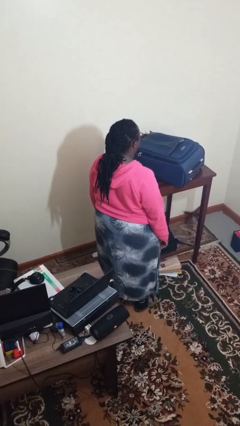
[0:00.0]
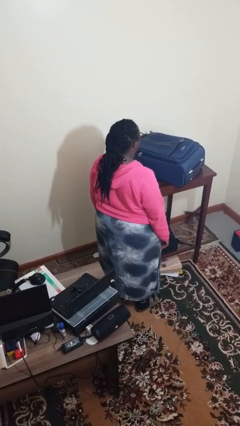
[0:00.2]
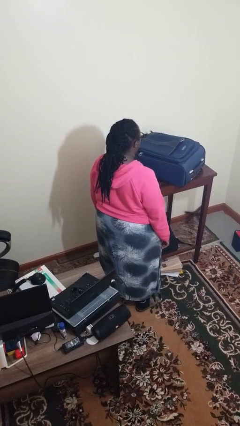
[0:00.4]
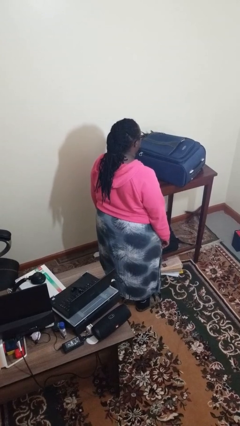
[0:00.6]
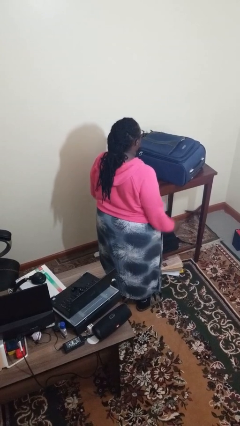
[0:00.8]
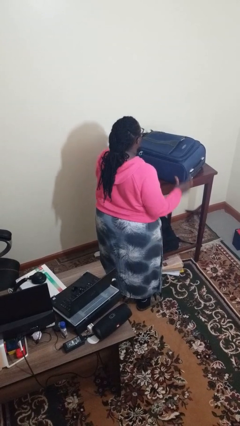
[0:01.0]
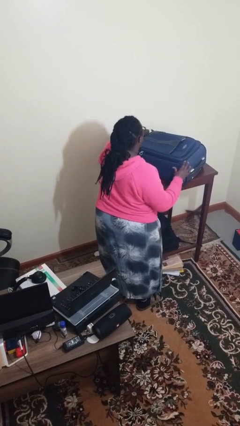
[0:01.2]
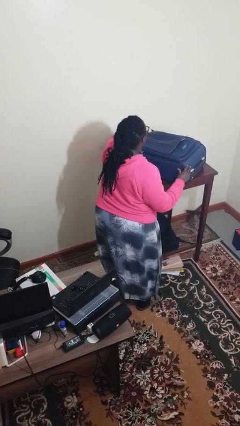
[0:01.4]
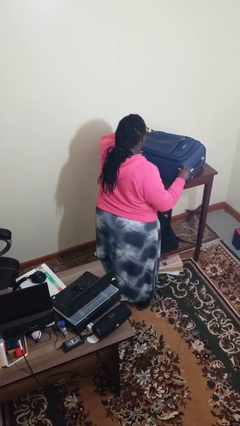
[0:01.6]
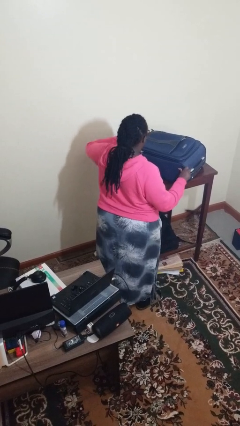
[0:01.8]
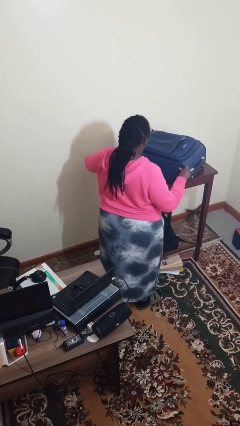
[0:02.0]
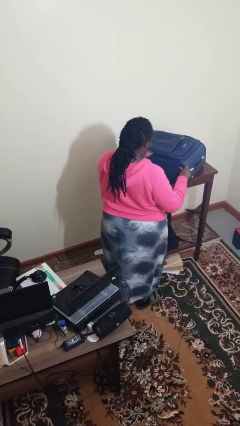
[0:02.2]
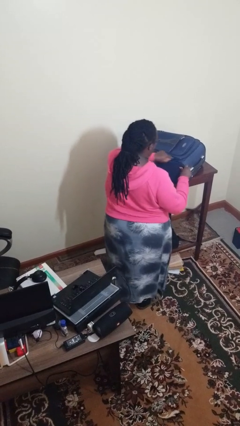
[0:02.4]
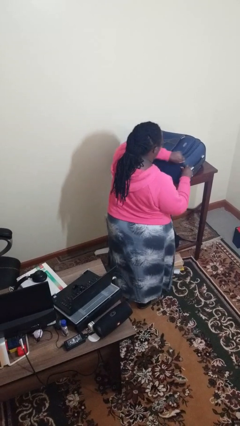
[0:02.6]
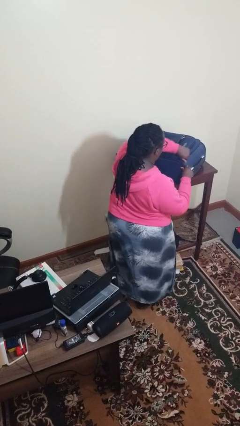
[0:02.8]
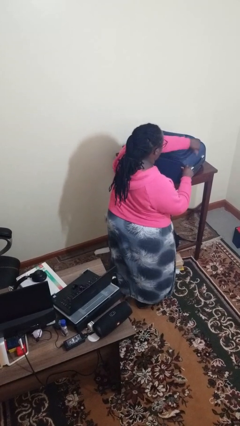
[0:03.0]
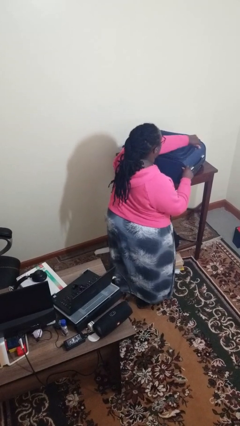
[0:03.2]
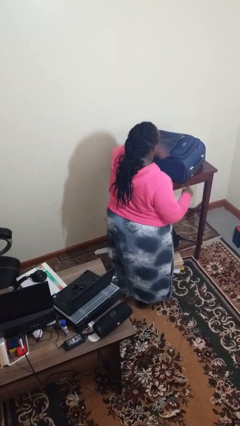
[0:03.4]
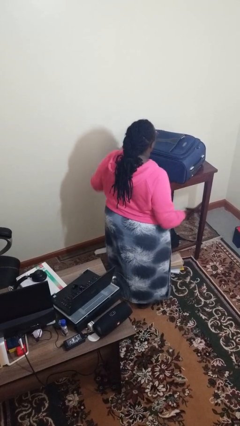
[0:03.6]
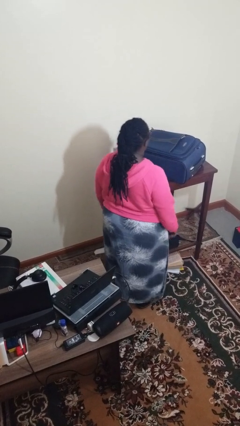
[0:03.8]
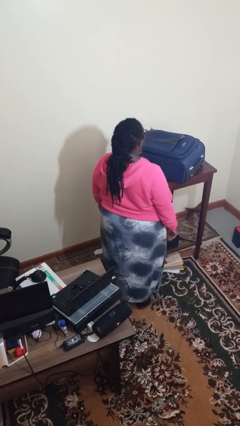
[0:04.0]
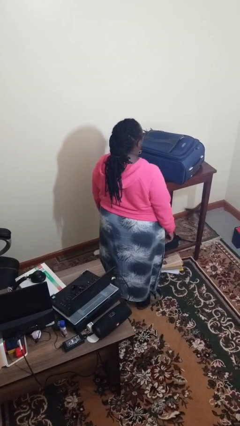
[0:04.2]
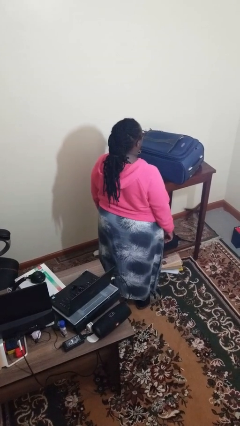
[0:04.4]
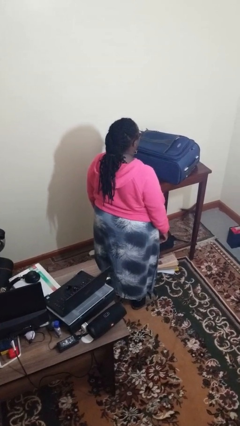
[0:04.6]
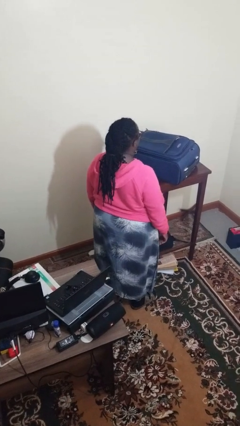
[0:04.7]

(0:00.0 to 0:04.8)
person opens suitcase

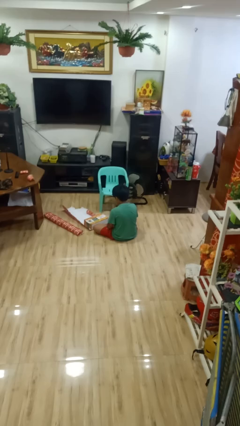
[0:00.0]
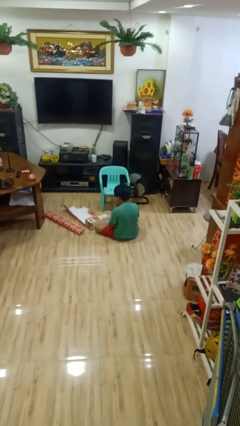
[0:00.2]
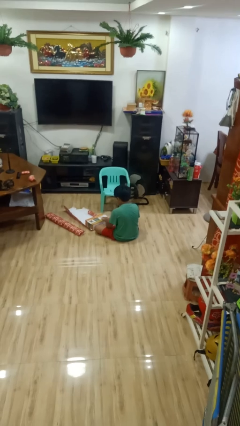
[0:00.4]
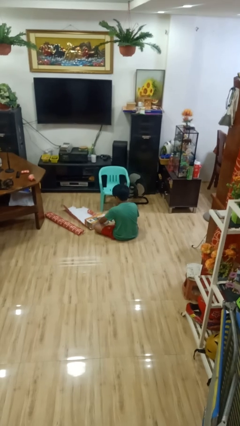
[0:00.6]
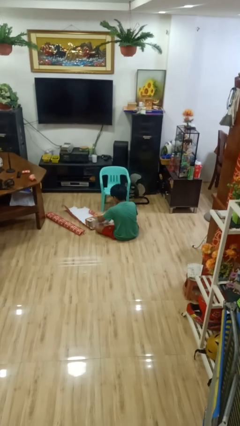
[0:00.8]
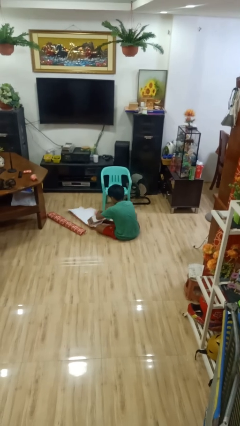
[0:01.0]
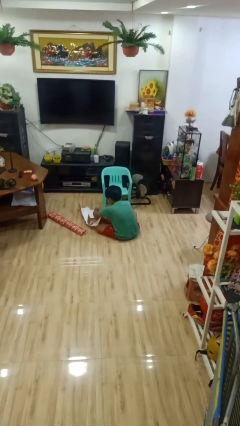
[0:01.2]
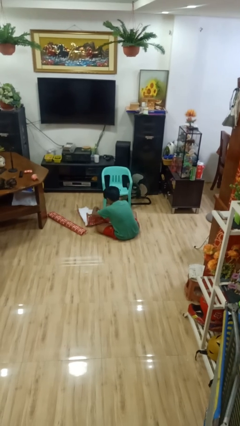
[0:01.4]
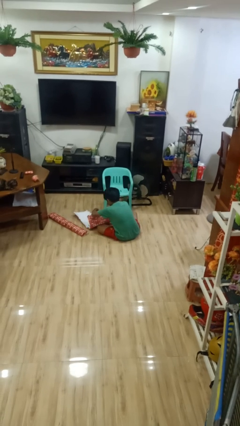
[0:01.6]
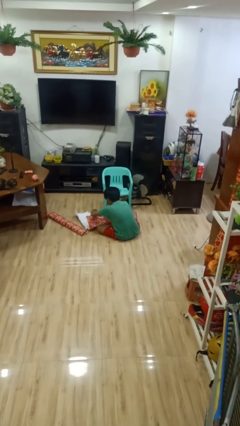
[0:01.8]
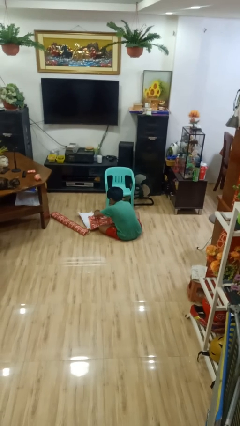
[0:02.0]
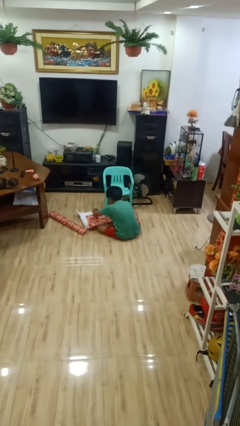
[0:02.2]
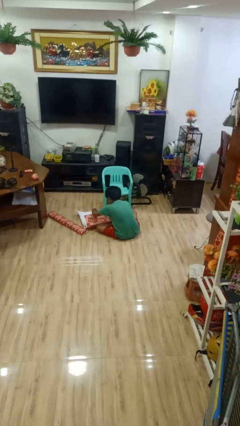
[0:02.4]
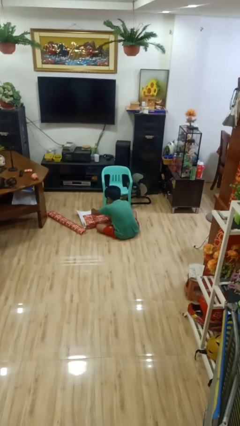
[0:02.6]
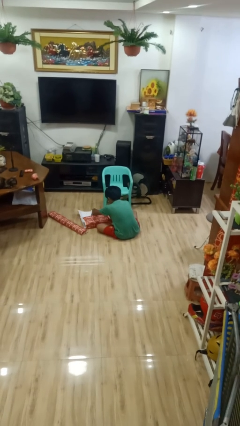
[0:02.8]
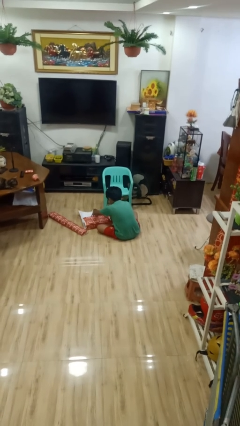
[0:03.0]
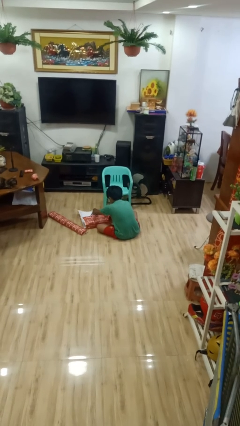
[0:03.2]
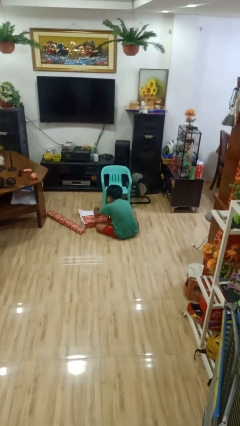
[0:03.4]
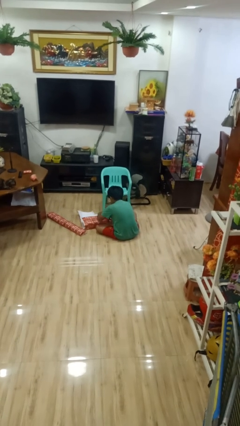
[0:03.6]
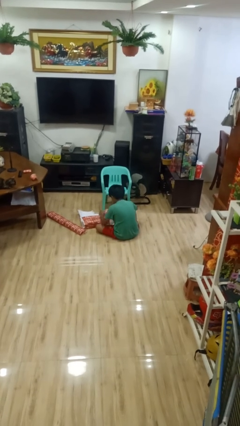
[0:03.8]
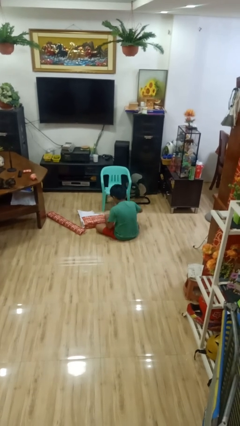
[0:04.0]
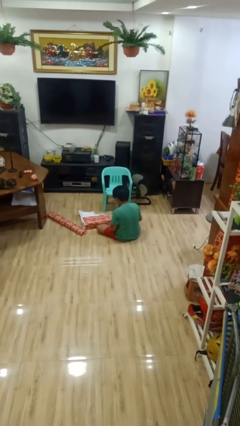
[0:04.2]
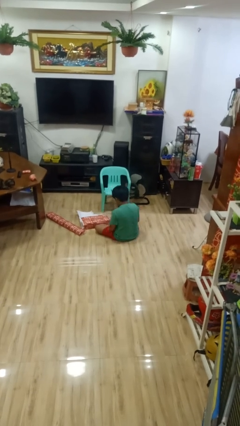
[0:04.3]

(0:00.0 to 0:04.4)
person wraps box

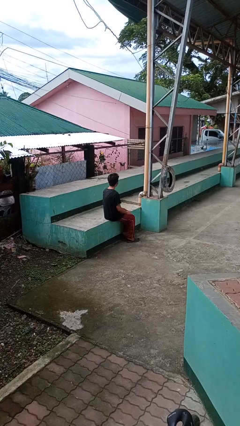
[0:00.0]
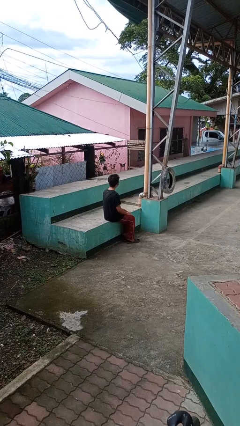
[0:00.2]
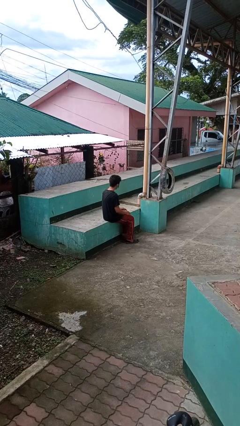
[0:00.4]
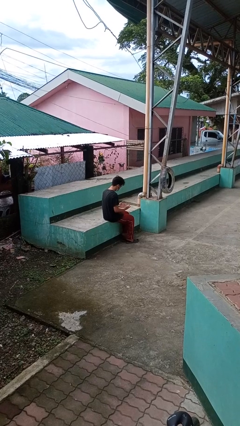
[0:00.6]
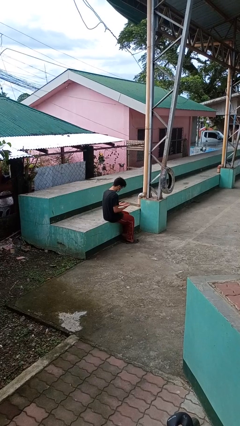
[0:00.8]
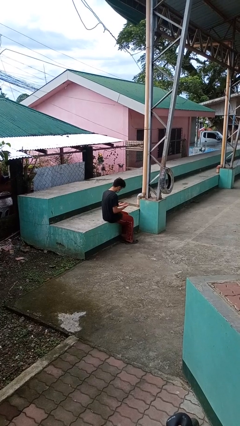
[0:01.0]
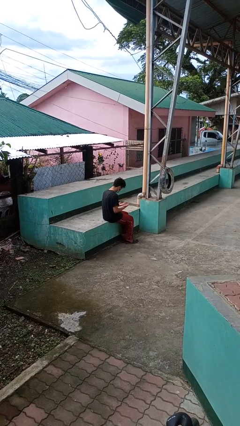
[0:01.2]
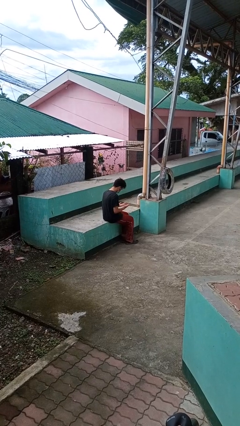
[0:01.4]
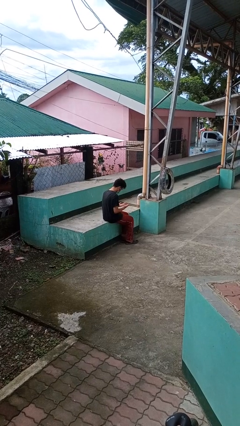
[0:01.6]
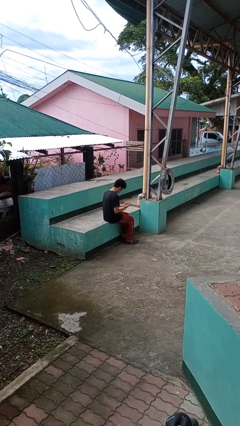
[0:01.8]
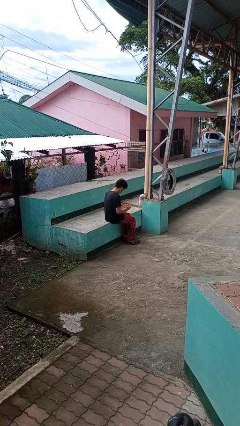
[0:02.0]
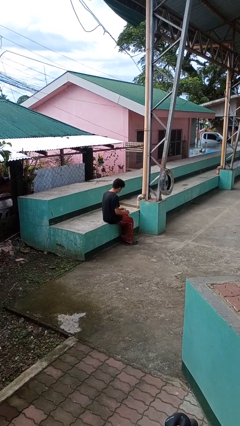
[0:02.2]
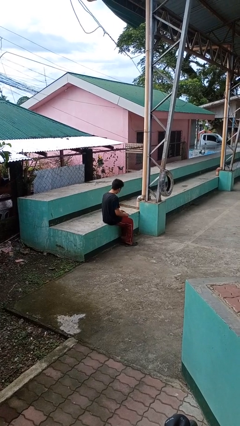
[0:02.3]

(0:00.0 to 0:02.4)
person looks at hands in lap

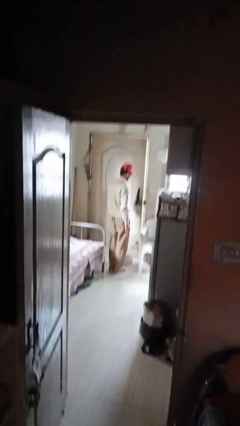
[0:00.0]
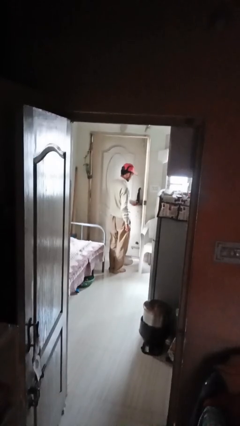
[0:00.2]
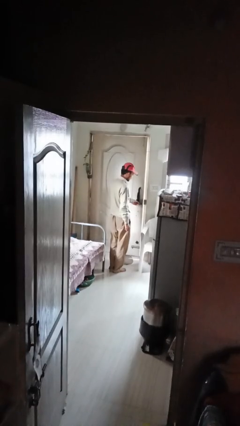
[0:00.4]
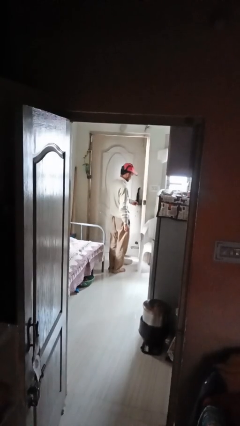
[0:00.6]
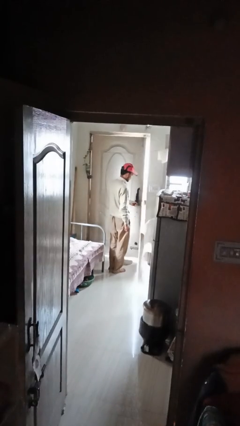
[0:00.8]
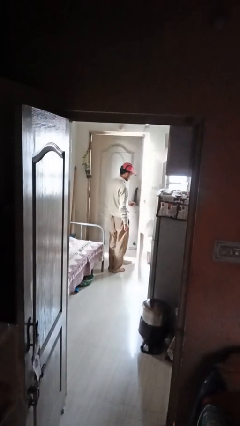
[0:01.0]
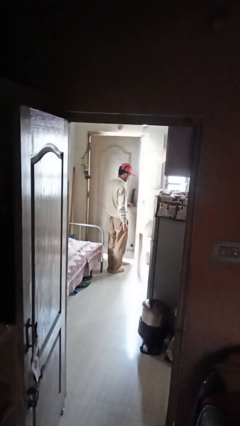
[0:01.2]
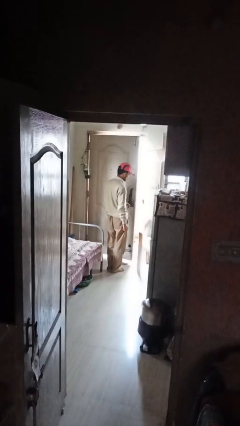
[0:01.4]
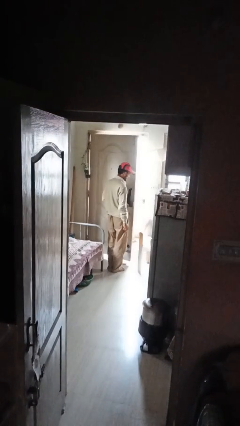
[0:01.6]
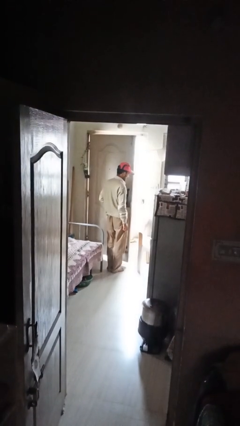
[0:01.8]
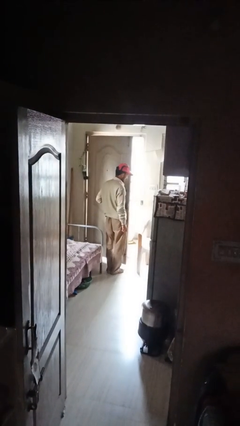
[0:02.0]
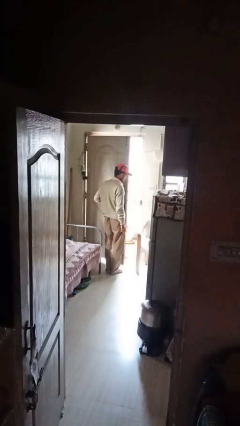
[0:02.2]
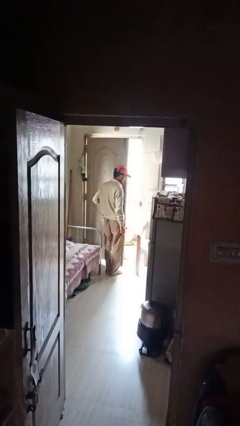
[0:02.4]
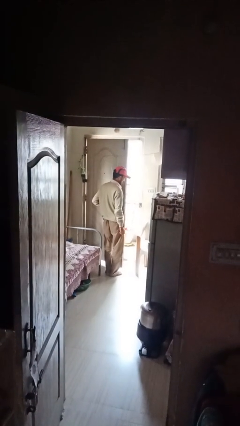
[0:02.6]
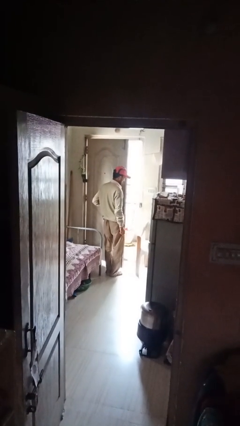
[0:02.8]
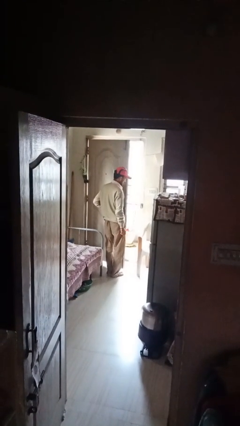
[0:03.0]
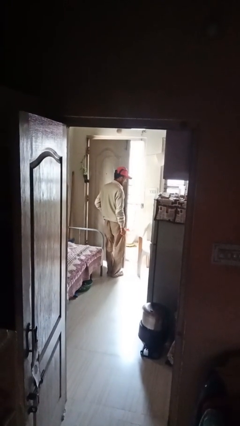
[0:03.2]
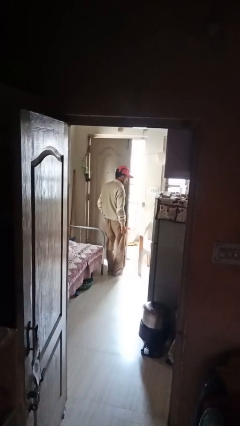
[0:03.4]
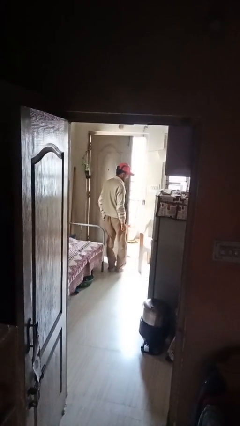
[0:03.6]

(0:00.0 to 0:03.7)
person opens facility door

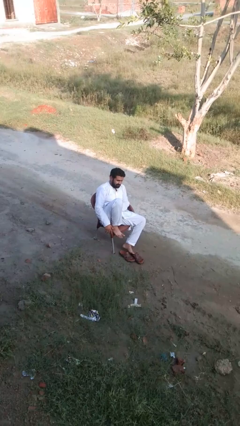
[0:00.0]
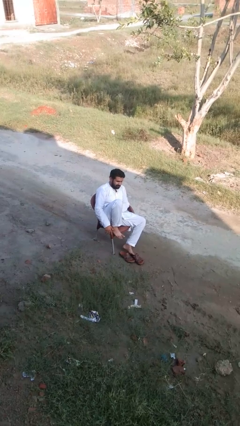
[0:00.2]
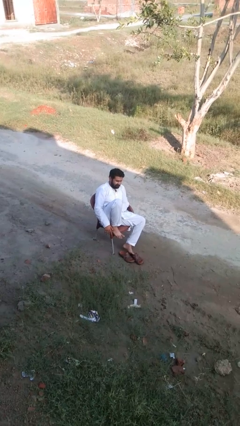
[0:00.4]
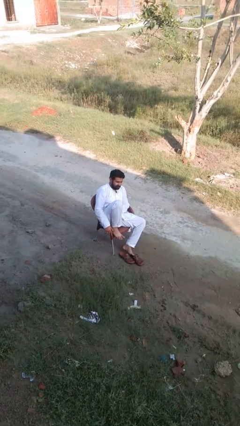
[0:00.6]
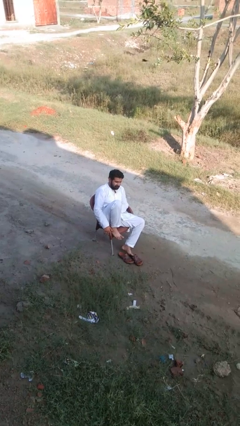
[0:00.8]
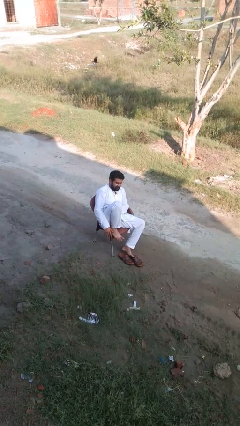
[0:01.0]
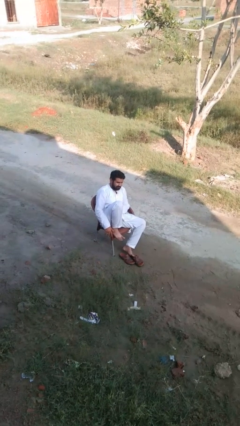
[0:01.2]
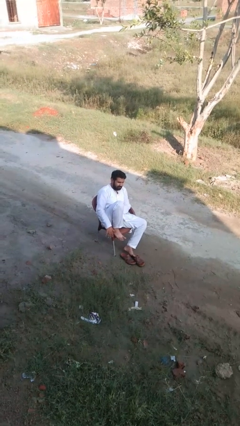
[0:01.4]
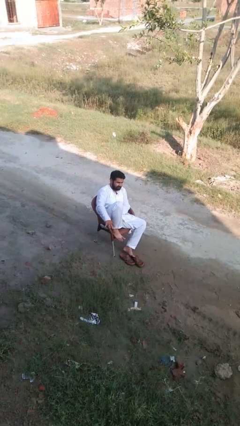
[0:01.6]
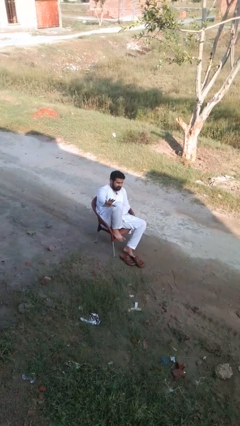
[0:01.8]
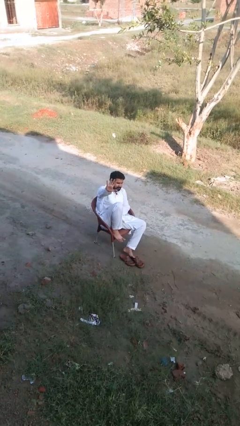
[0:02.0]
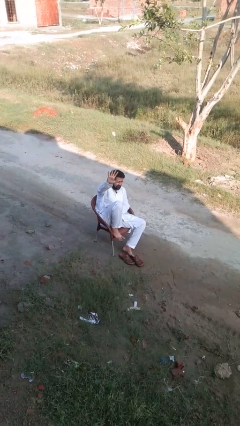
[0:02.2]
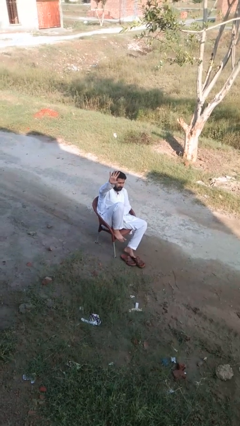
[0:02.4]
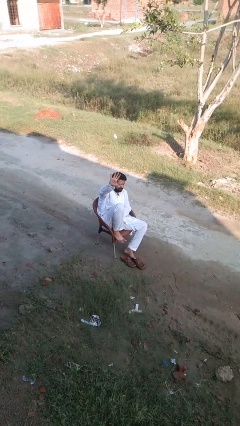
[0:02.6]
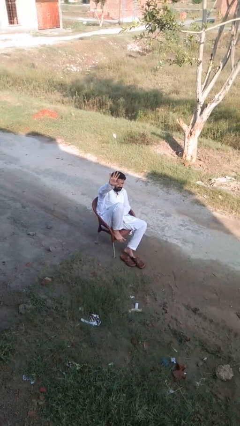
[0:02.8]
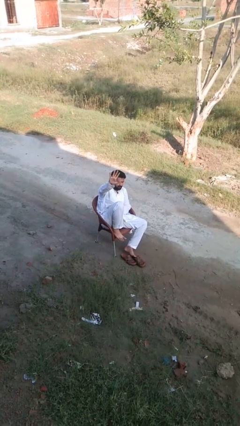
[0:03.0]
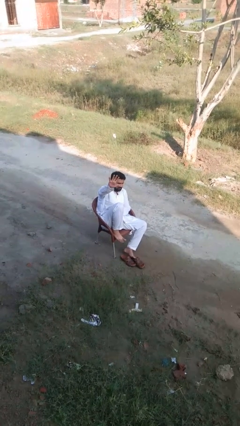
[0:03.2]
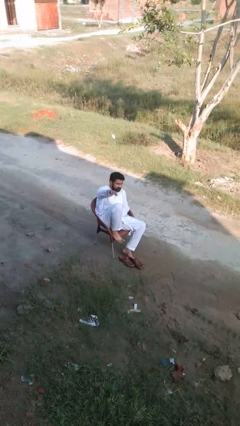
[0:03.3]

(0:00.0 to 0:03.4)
person gestures number five
